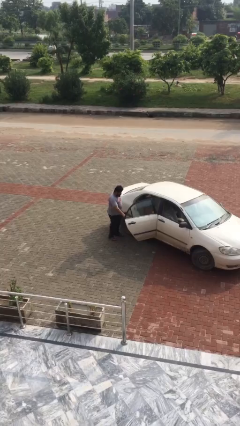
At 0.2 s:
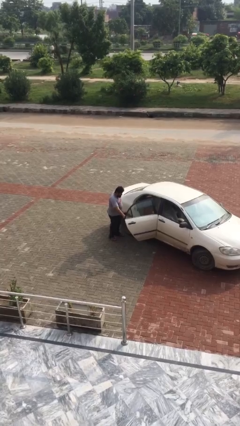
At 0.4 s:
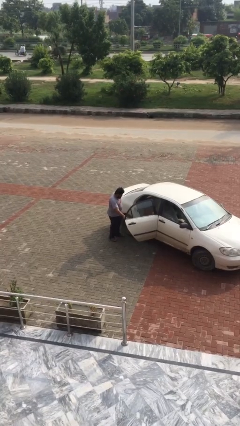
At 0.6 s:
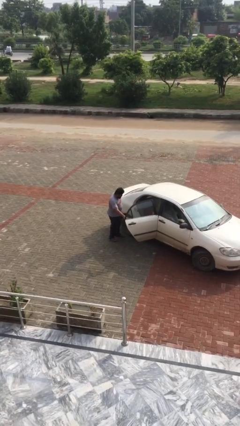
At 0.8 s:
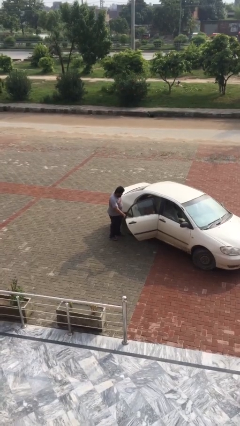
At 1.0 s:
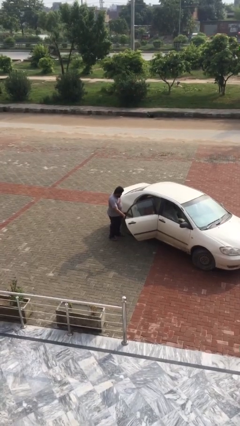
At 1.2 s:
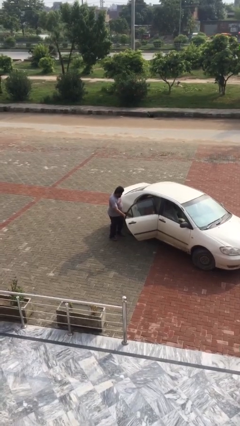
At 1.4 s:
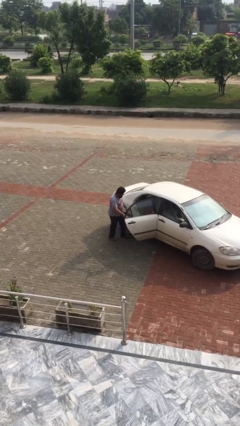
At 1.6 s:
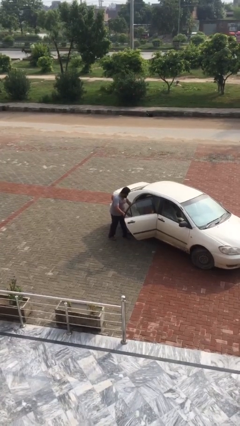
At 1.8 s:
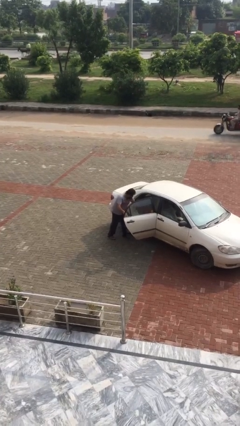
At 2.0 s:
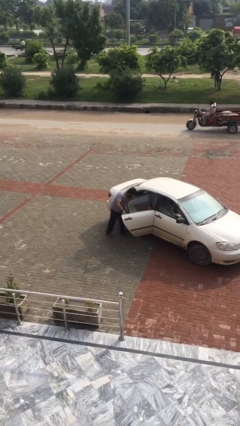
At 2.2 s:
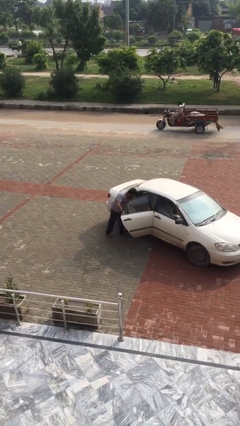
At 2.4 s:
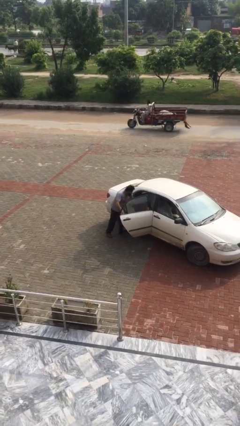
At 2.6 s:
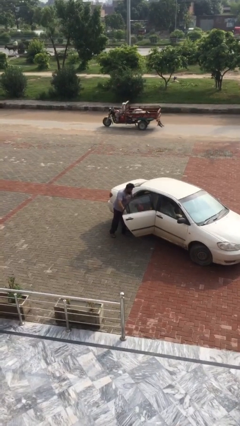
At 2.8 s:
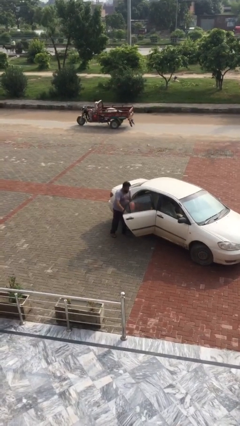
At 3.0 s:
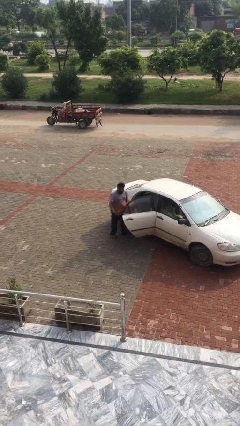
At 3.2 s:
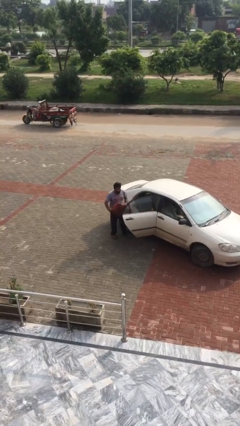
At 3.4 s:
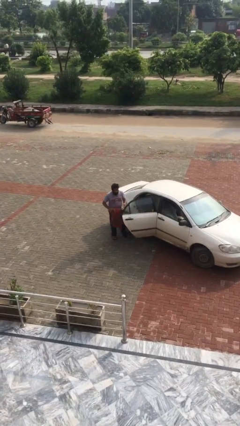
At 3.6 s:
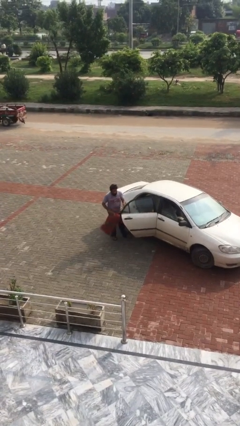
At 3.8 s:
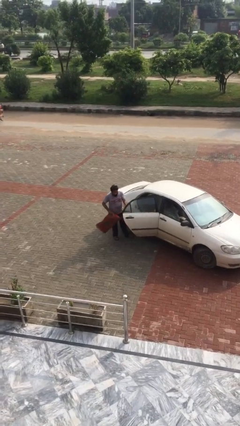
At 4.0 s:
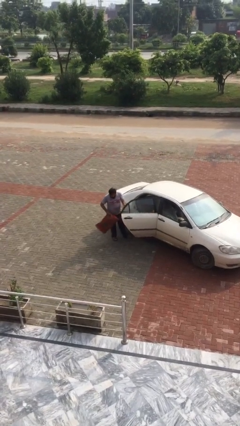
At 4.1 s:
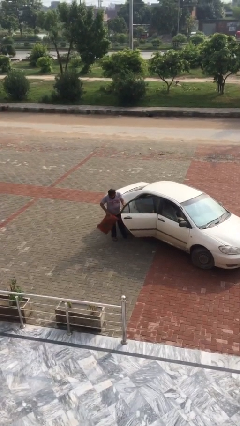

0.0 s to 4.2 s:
person unloads car

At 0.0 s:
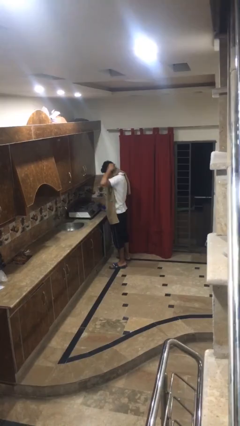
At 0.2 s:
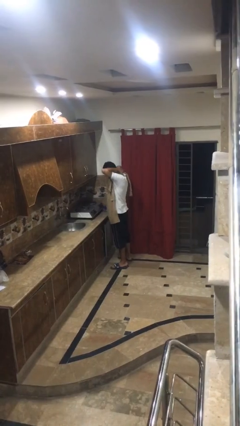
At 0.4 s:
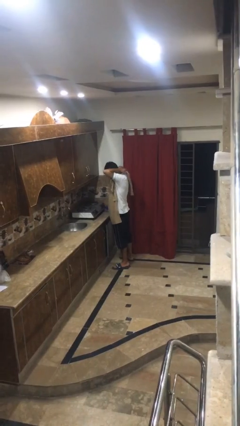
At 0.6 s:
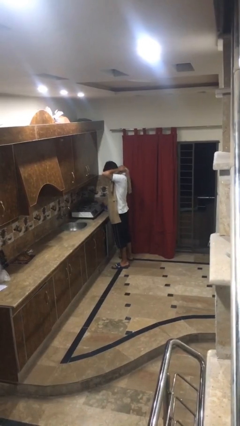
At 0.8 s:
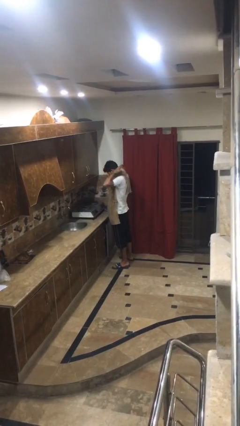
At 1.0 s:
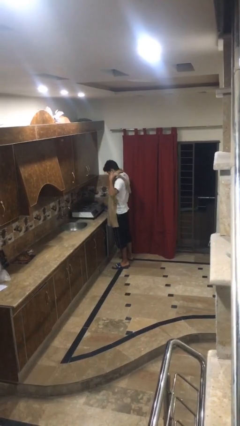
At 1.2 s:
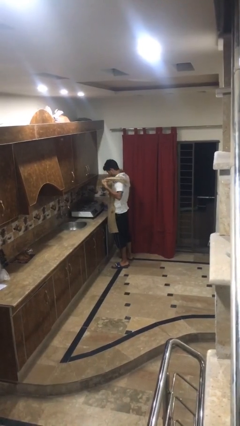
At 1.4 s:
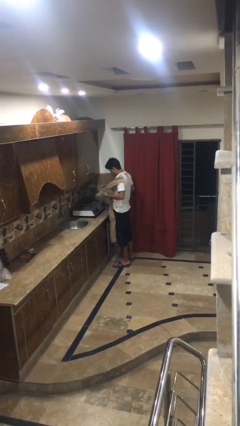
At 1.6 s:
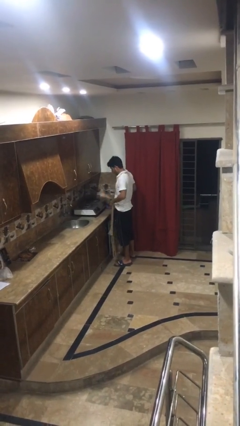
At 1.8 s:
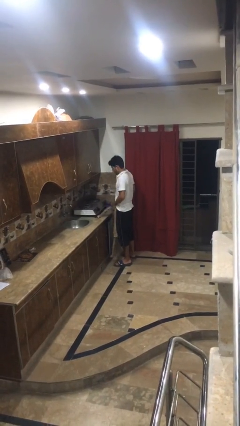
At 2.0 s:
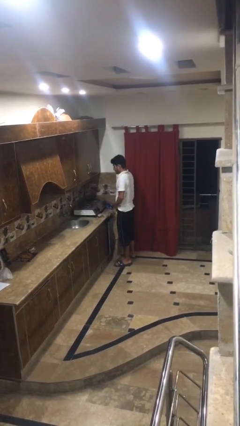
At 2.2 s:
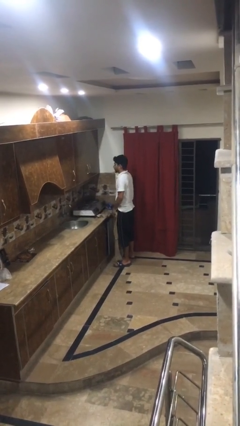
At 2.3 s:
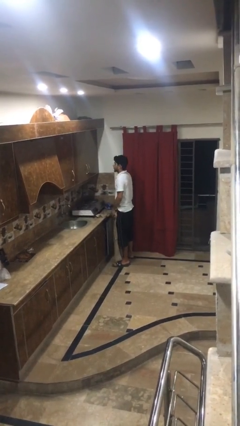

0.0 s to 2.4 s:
person takes off apron

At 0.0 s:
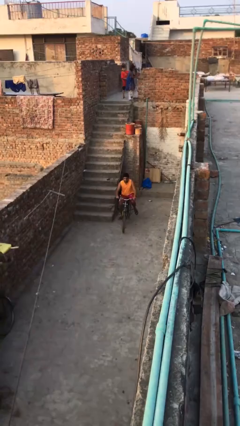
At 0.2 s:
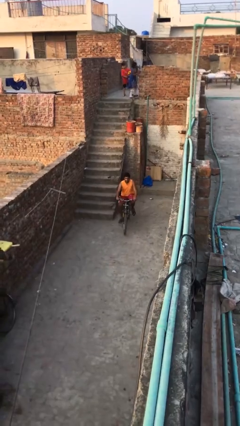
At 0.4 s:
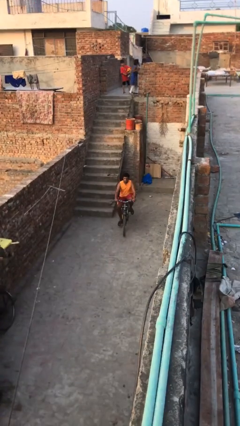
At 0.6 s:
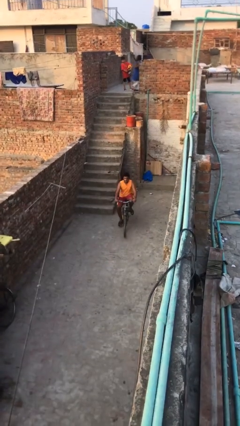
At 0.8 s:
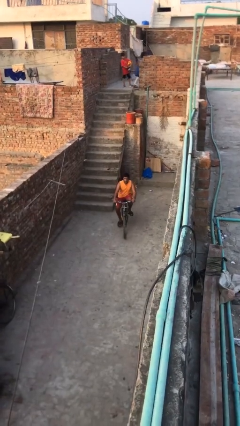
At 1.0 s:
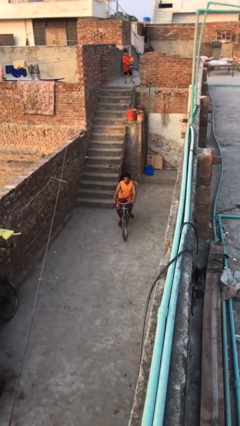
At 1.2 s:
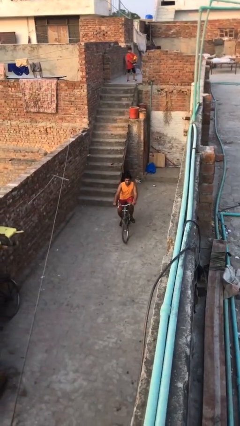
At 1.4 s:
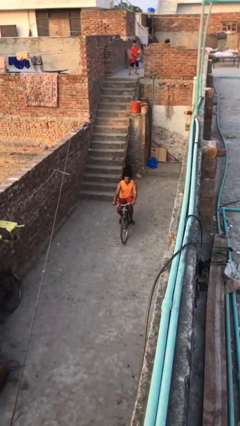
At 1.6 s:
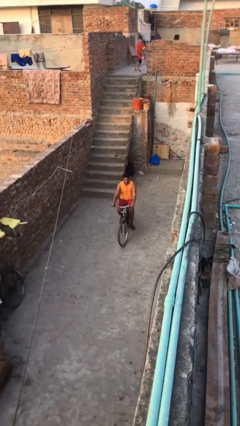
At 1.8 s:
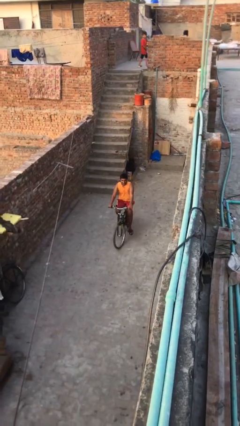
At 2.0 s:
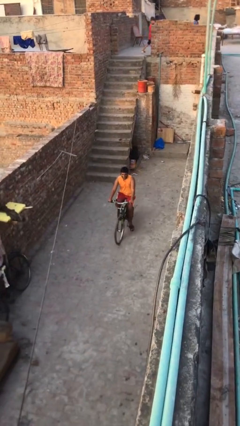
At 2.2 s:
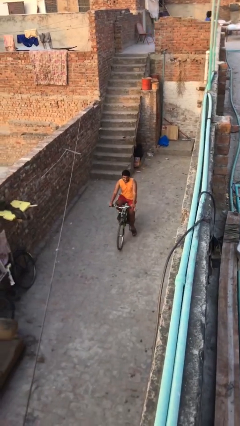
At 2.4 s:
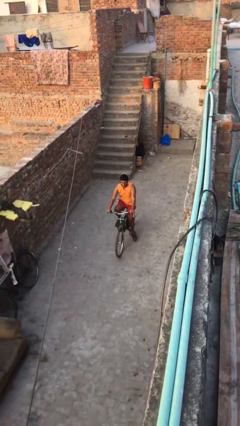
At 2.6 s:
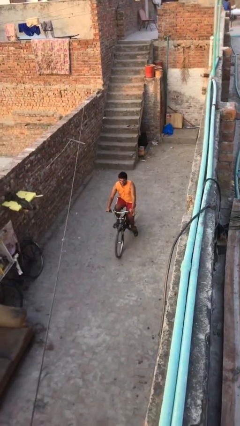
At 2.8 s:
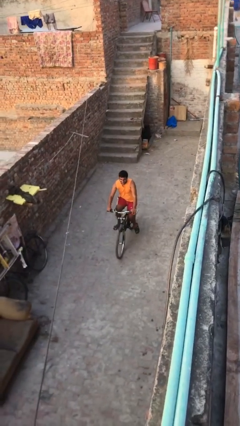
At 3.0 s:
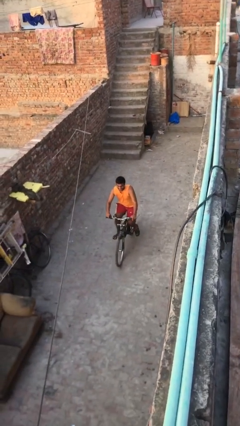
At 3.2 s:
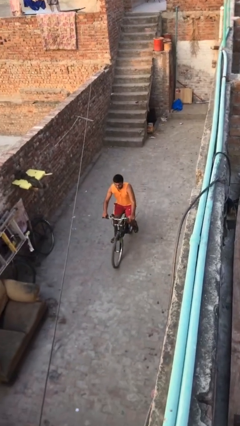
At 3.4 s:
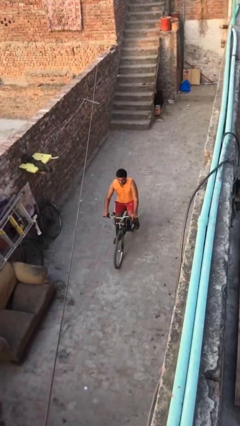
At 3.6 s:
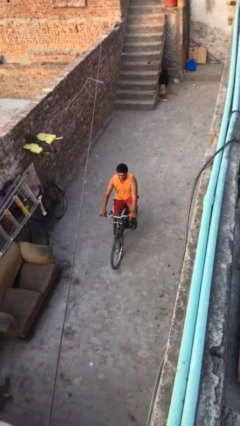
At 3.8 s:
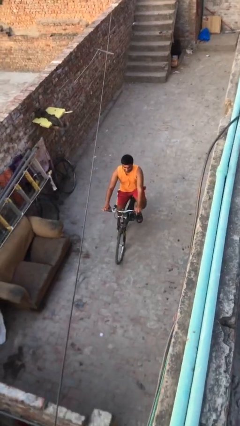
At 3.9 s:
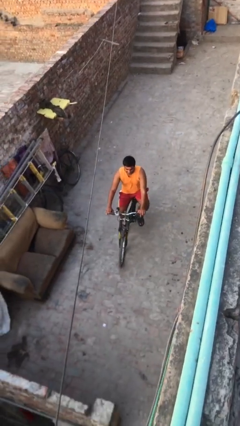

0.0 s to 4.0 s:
person rides bicycle

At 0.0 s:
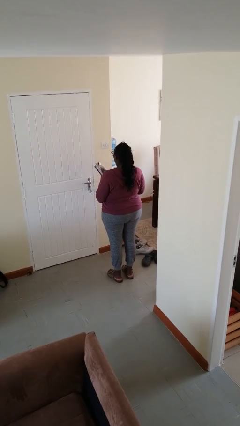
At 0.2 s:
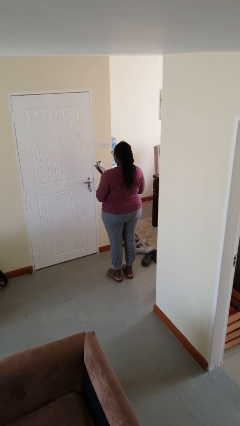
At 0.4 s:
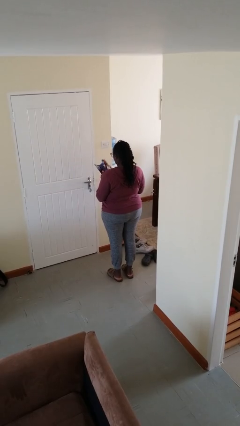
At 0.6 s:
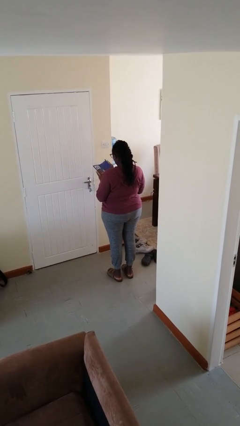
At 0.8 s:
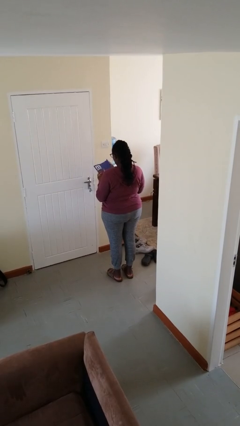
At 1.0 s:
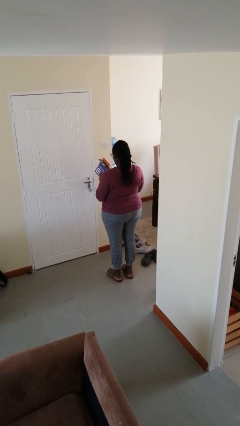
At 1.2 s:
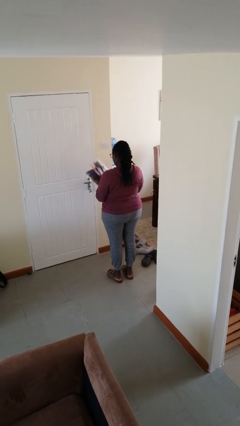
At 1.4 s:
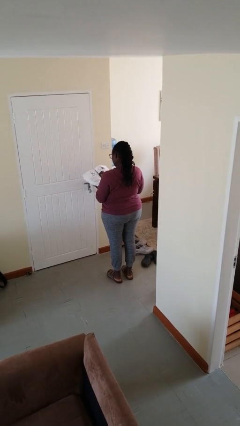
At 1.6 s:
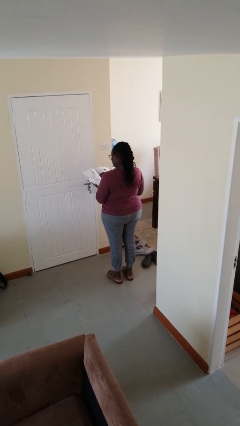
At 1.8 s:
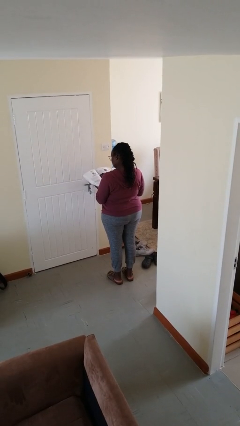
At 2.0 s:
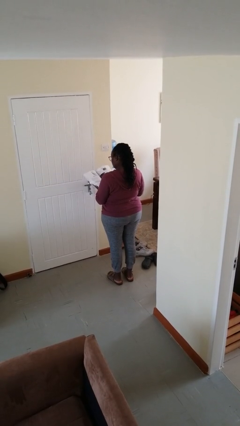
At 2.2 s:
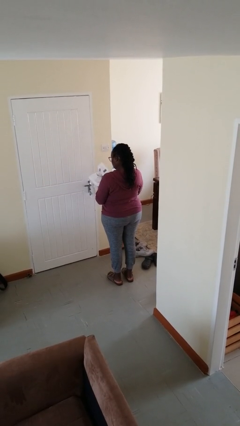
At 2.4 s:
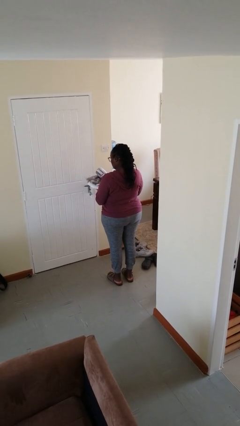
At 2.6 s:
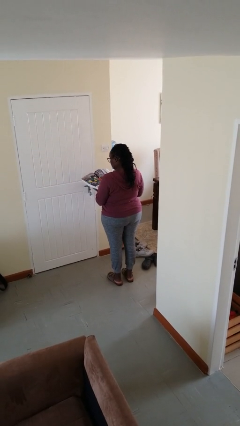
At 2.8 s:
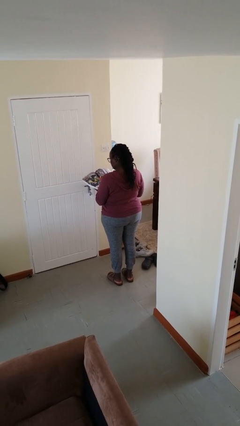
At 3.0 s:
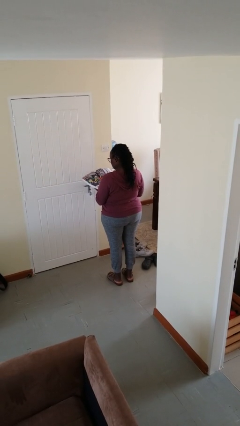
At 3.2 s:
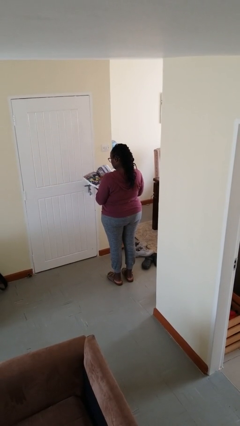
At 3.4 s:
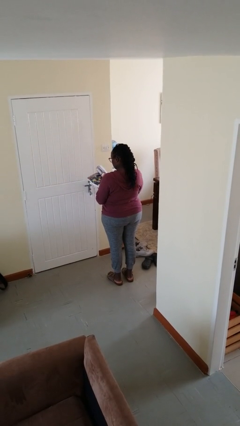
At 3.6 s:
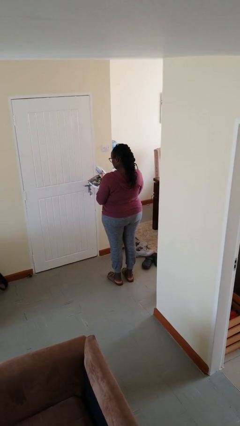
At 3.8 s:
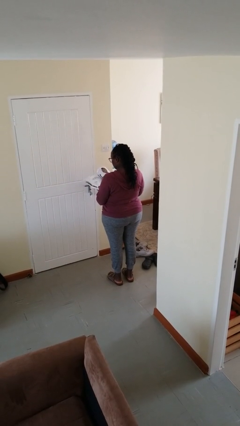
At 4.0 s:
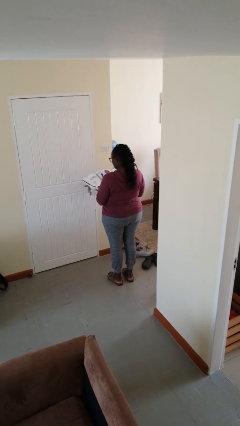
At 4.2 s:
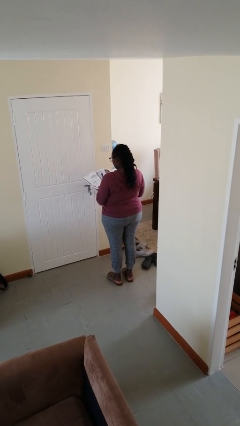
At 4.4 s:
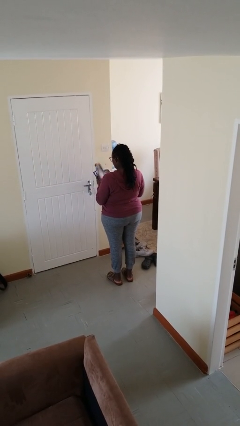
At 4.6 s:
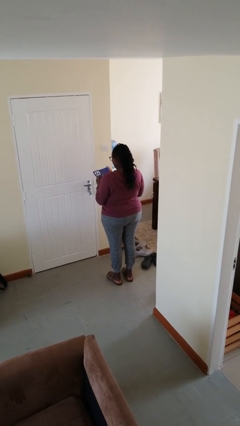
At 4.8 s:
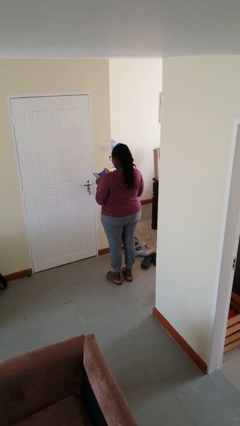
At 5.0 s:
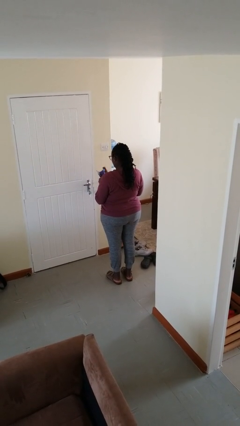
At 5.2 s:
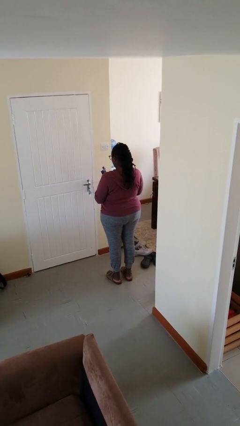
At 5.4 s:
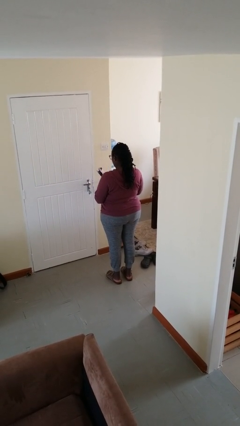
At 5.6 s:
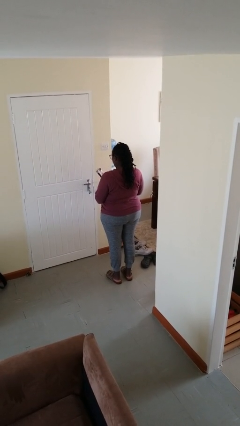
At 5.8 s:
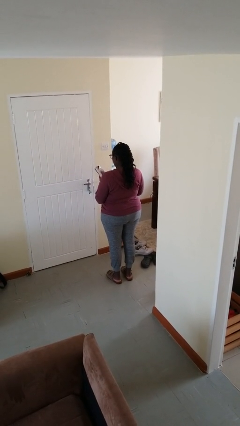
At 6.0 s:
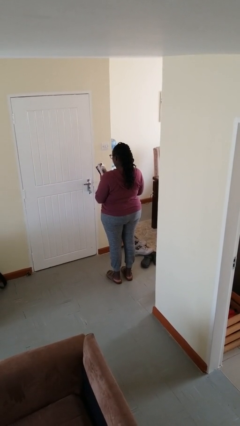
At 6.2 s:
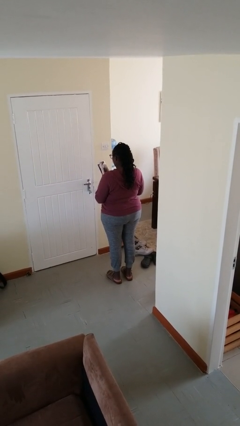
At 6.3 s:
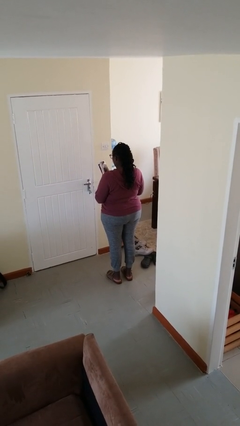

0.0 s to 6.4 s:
person reads magazine

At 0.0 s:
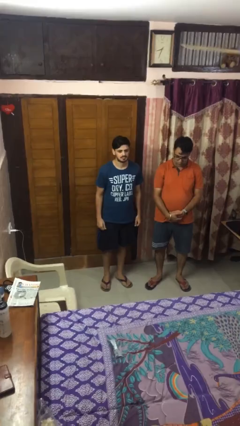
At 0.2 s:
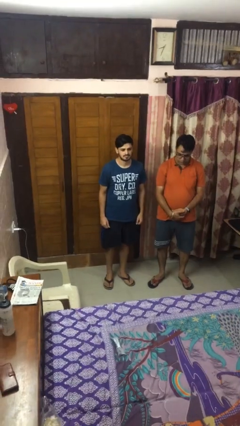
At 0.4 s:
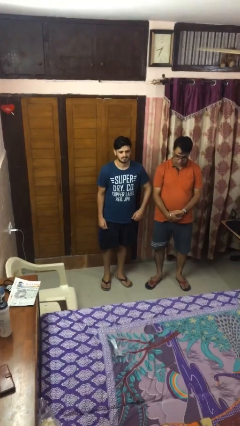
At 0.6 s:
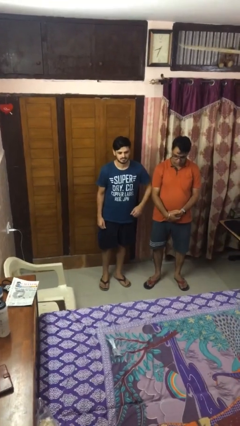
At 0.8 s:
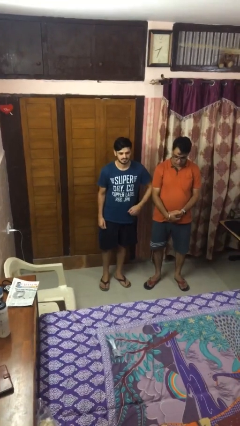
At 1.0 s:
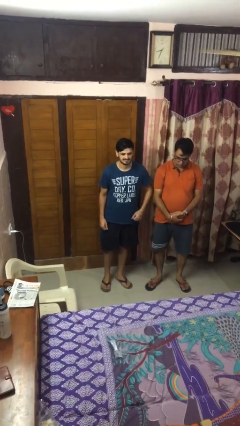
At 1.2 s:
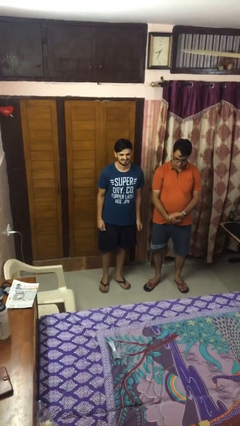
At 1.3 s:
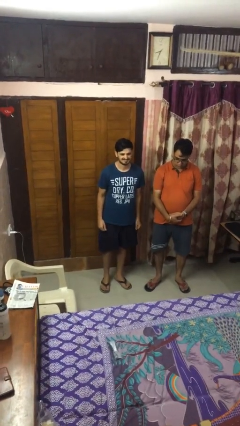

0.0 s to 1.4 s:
person nudges person with elbow
